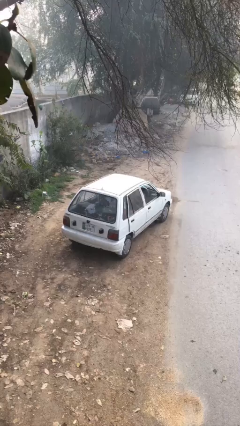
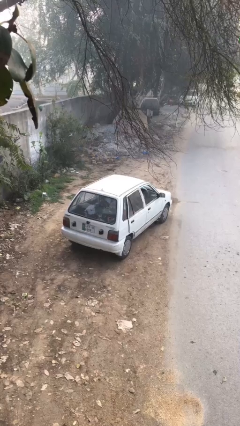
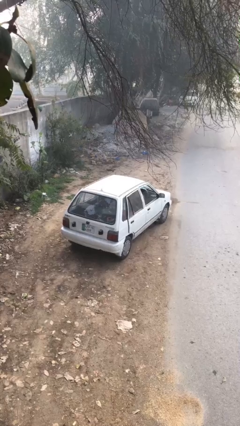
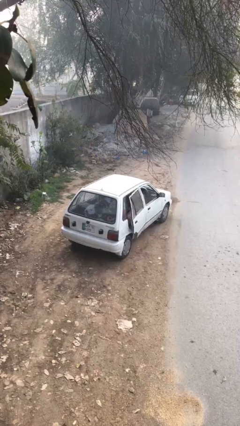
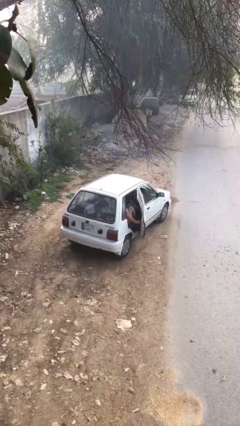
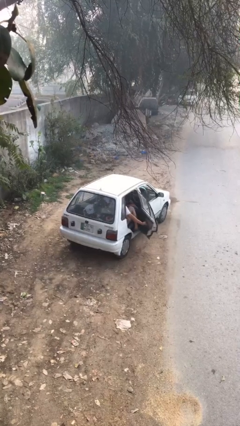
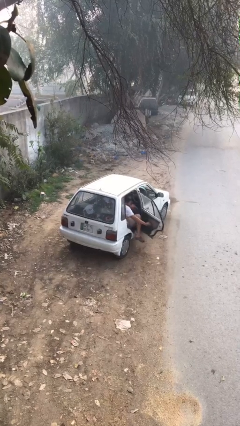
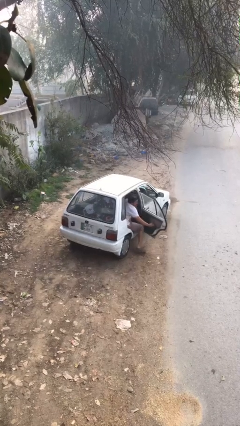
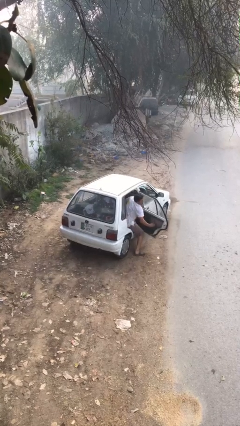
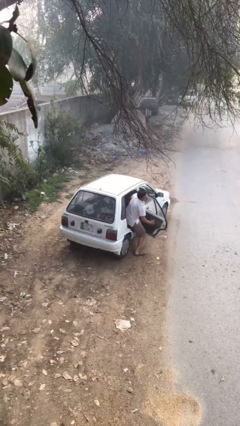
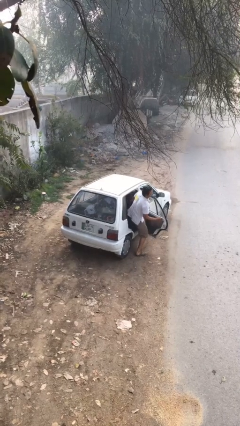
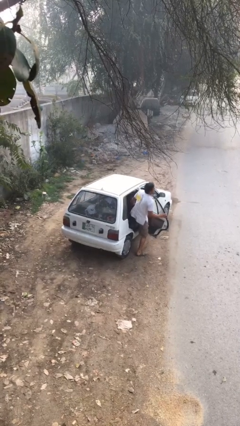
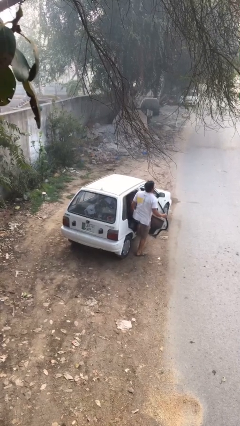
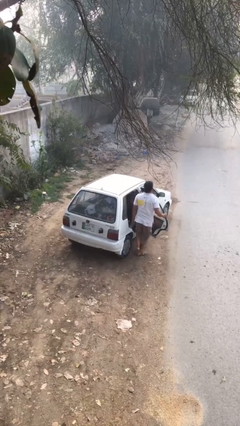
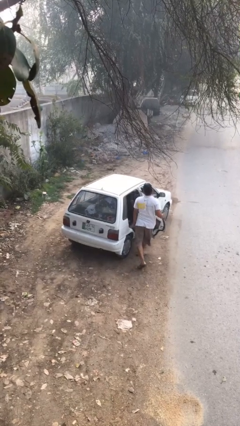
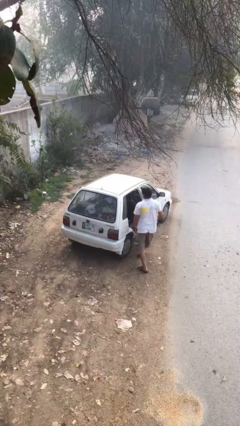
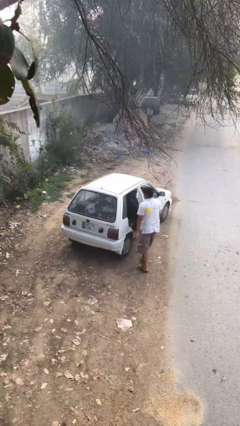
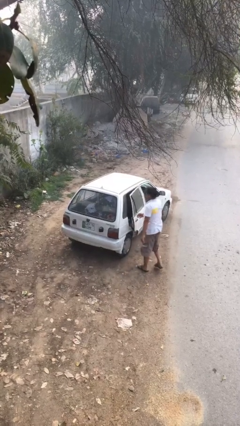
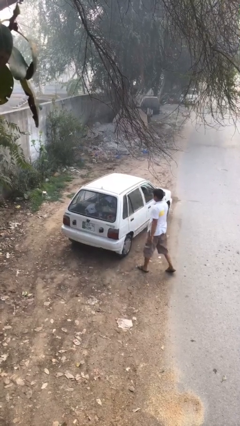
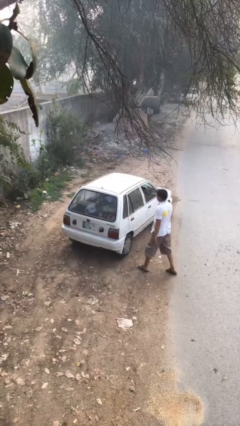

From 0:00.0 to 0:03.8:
car drops off person

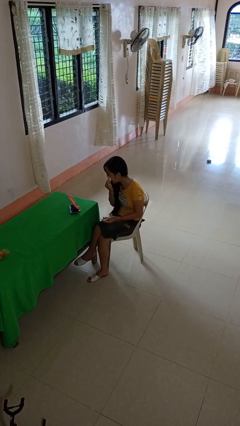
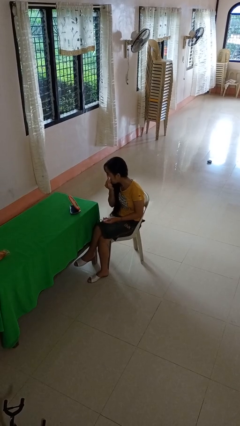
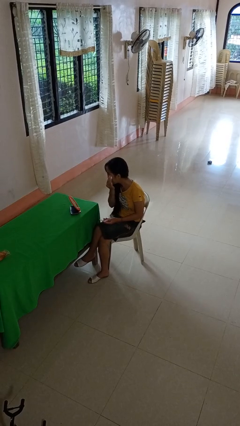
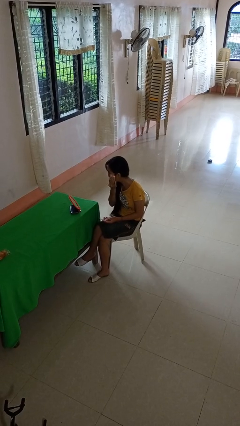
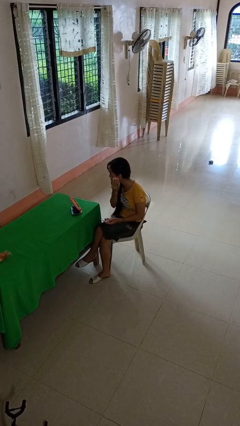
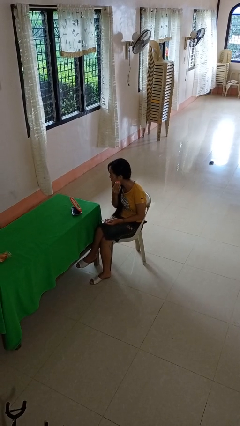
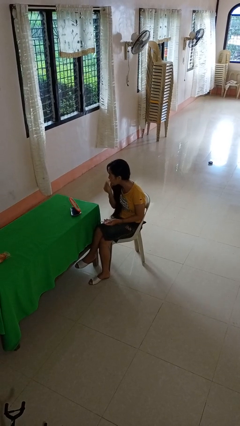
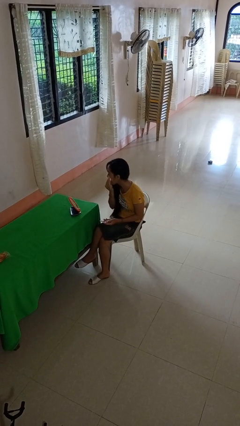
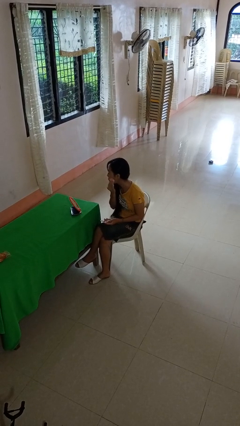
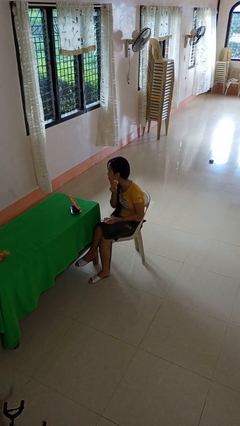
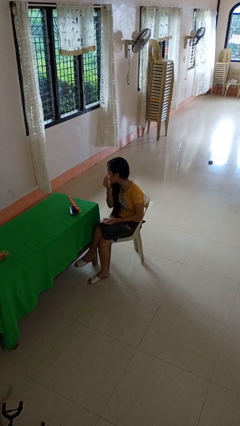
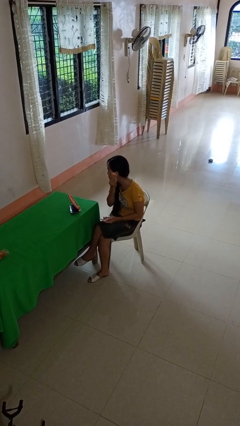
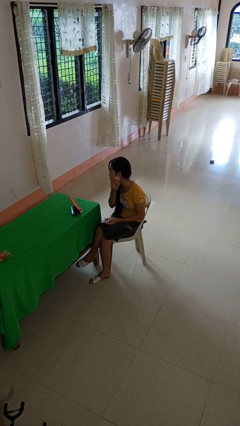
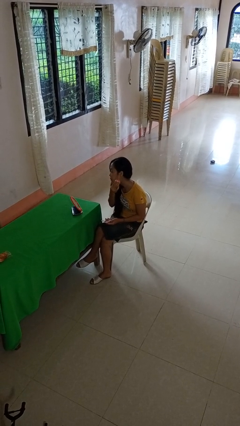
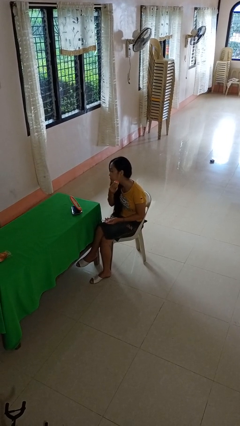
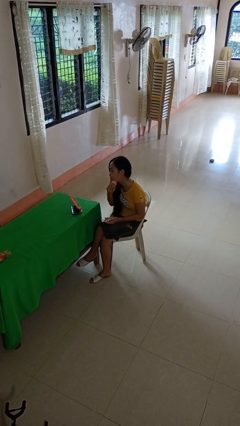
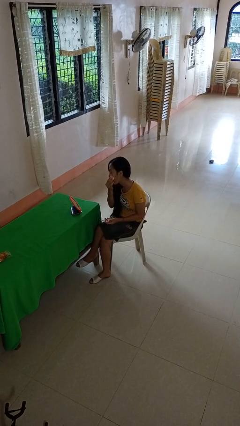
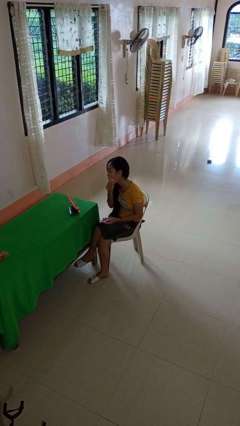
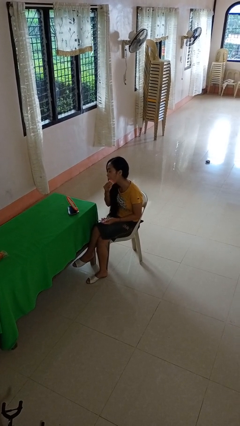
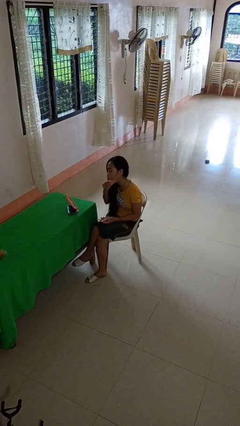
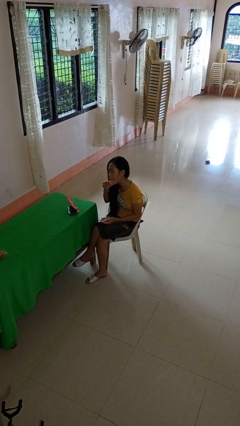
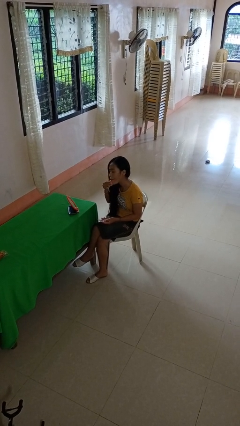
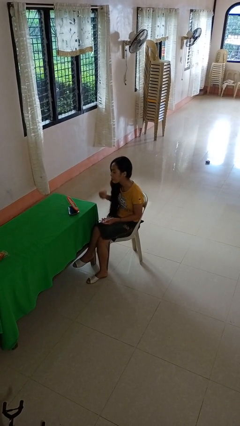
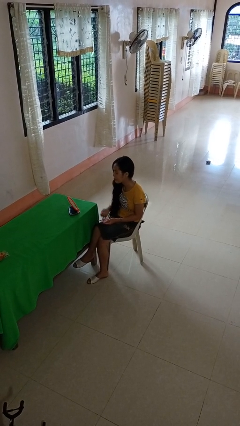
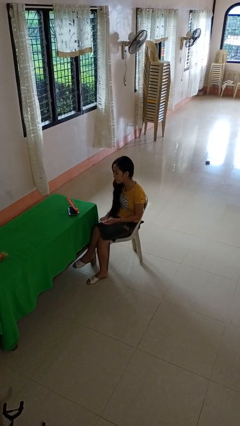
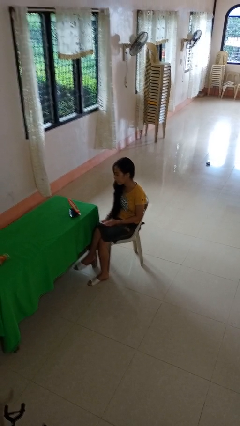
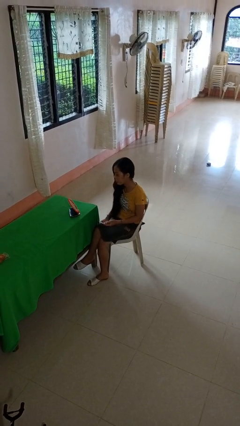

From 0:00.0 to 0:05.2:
person applies foundation makeup

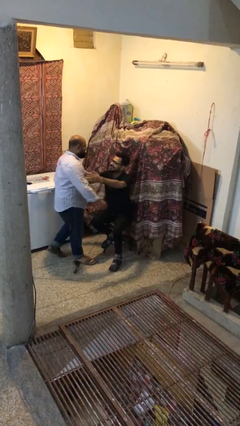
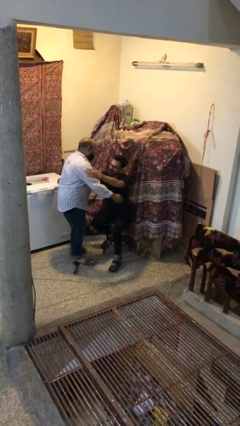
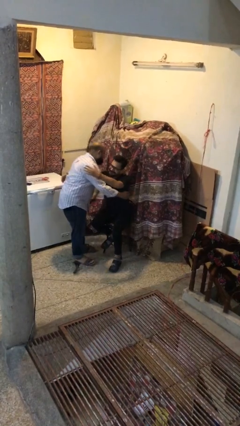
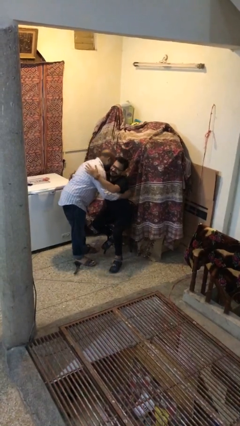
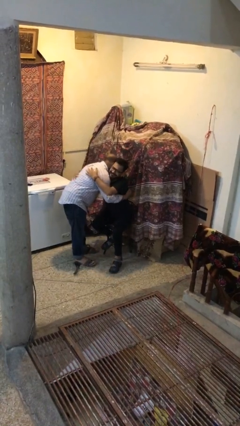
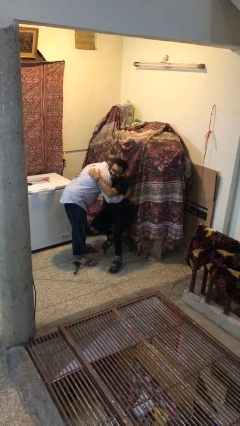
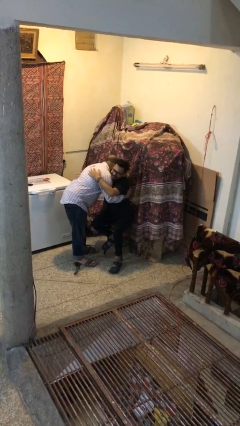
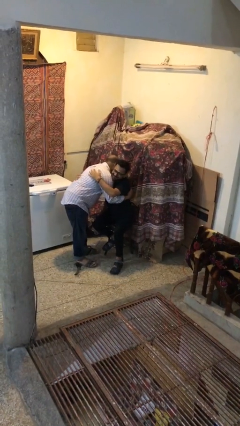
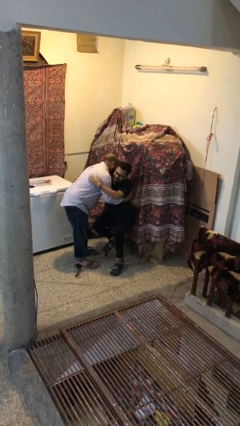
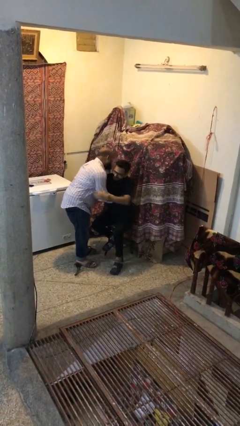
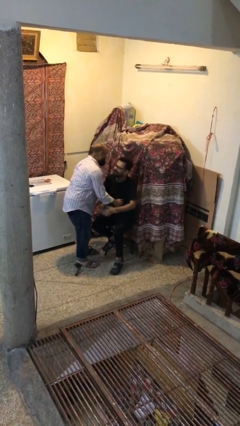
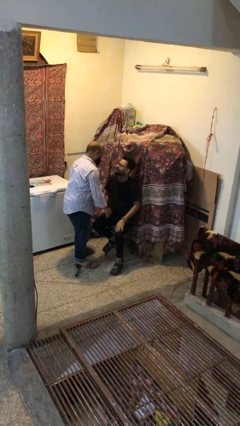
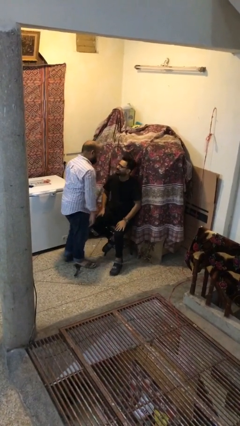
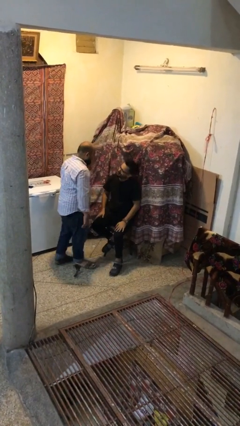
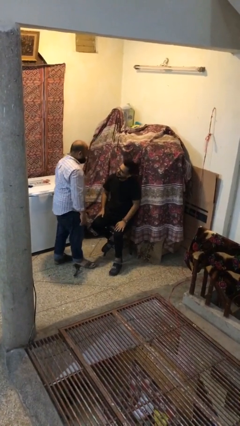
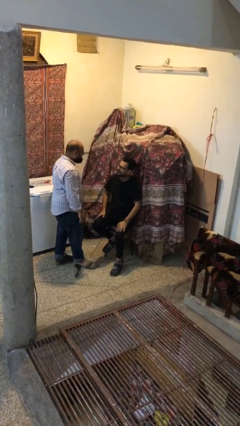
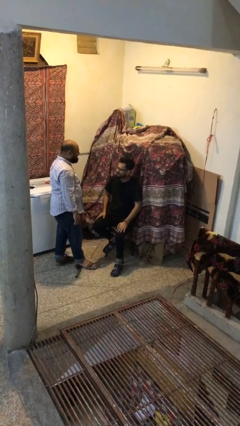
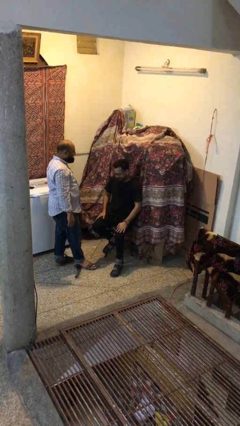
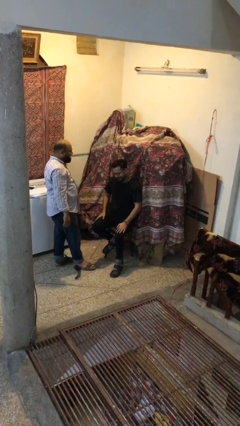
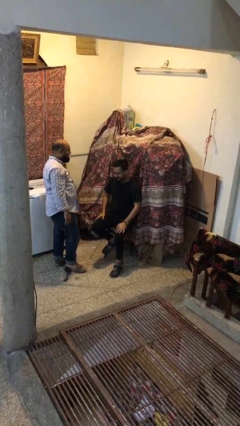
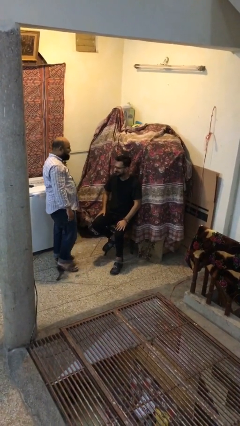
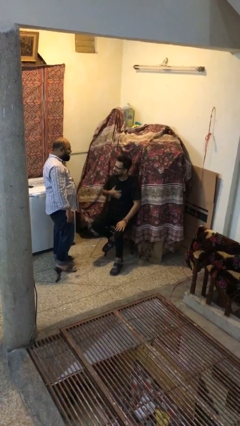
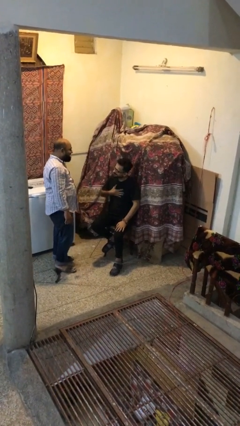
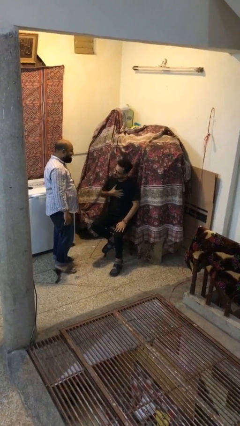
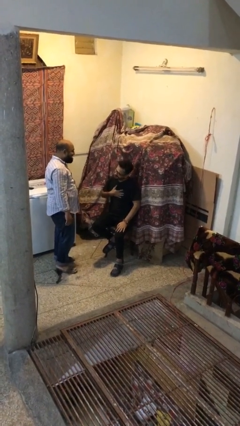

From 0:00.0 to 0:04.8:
person embraces person

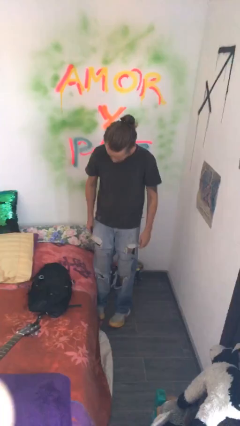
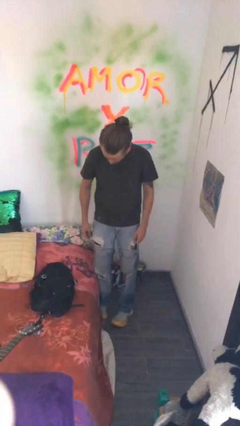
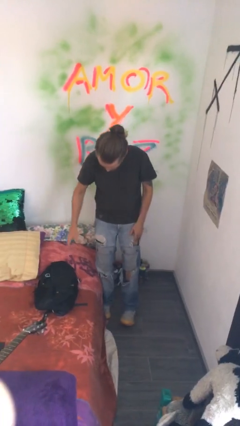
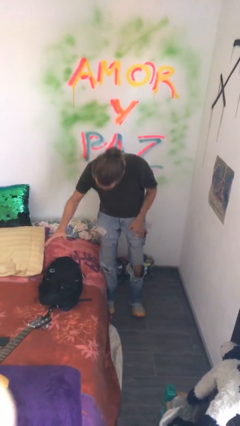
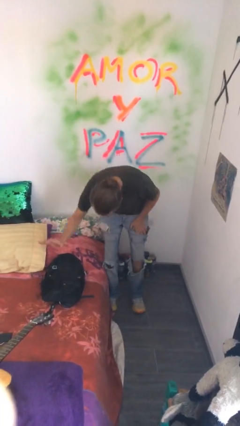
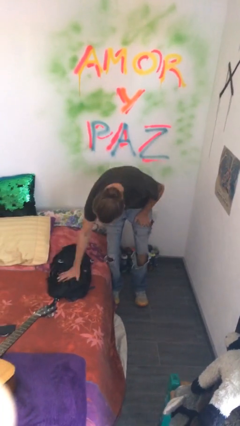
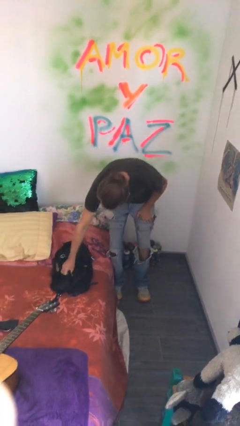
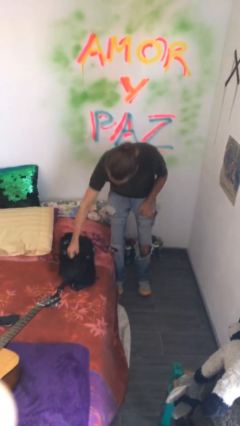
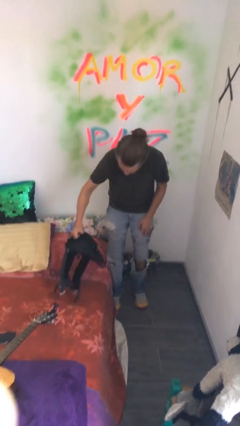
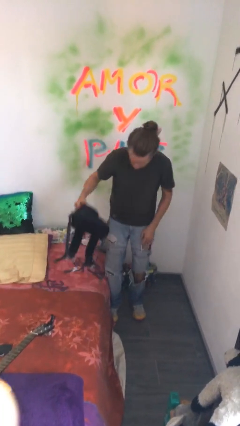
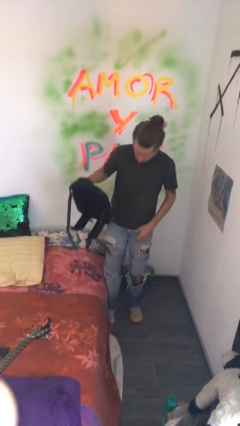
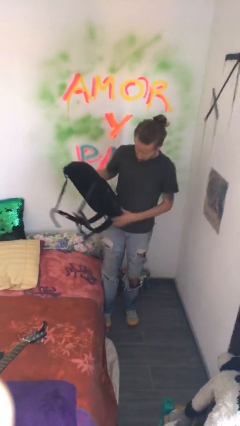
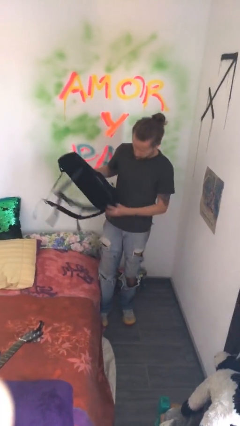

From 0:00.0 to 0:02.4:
person picks up object from bed

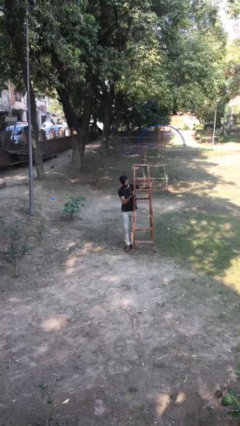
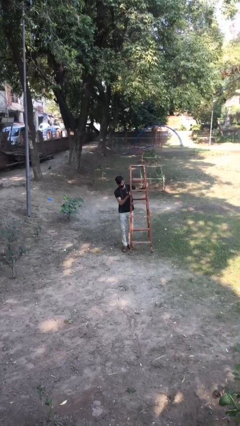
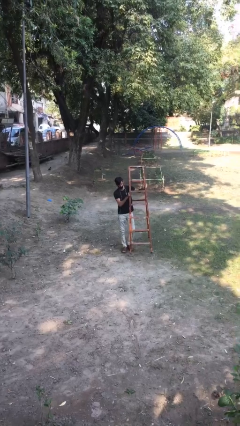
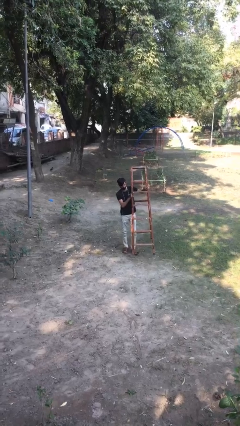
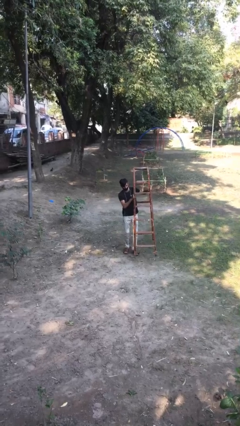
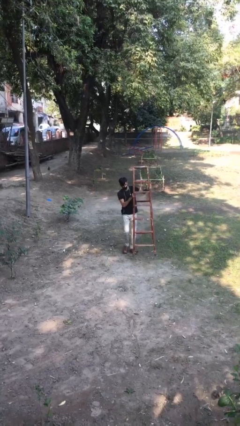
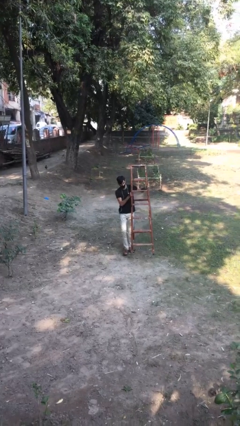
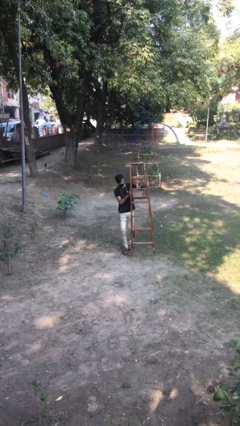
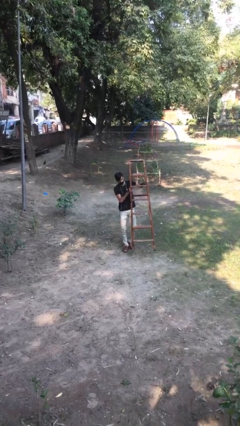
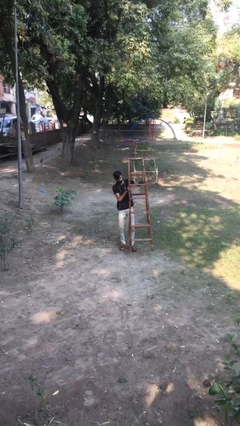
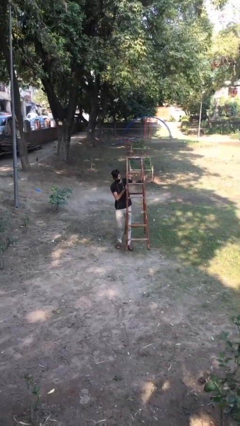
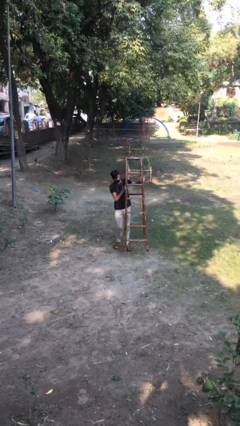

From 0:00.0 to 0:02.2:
person carries heavy object
